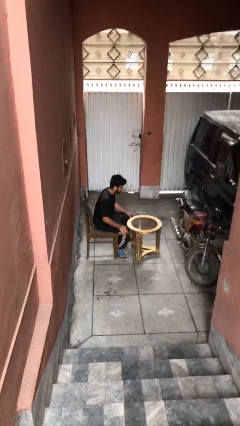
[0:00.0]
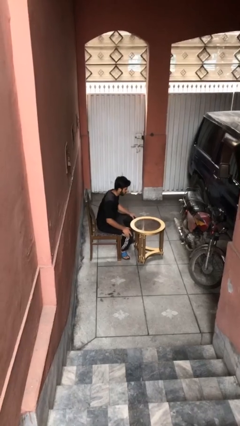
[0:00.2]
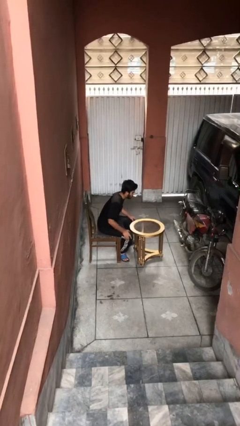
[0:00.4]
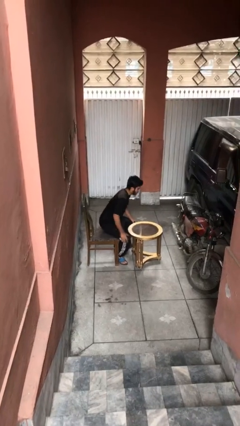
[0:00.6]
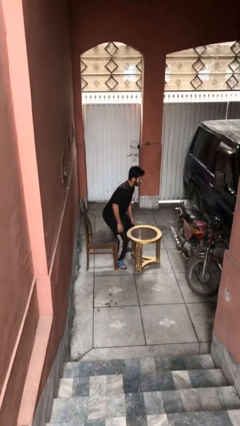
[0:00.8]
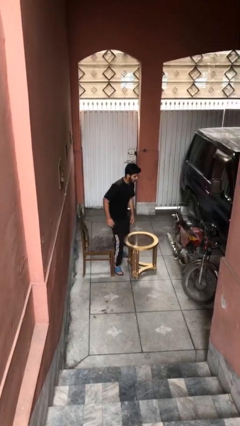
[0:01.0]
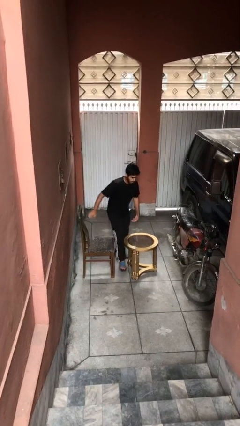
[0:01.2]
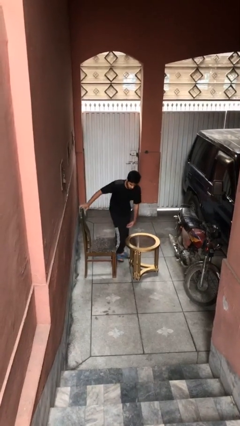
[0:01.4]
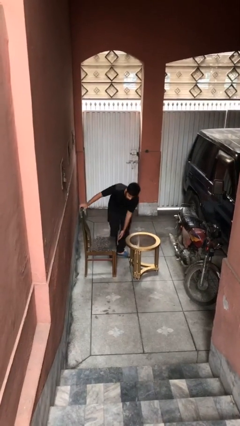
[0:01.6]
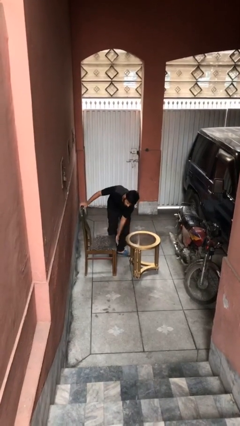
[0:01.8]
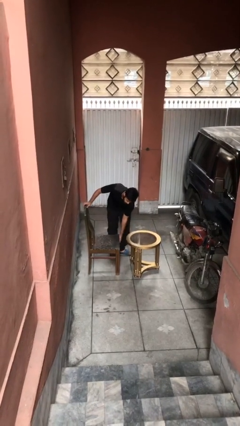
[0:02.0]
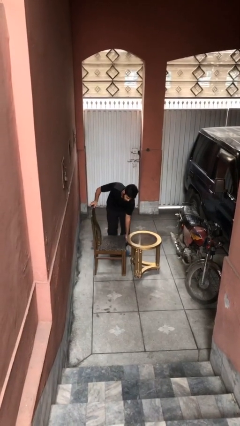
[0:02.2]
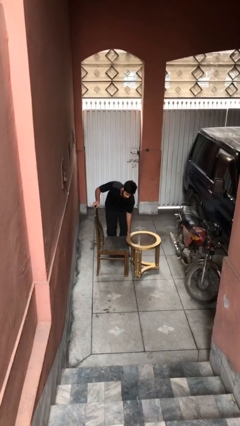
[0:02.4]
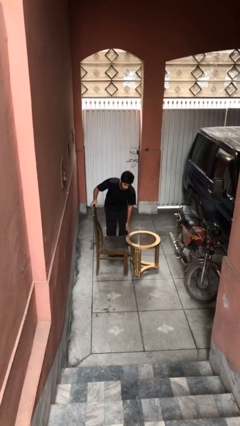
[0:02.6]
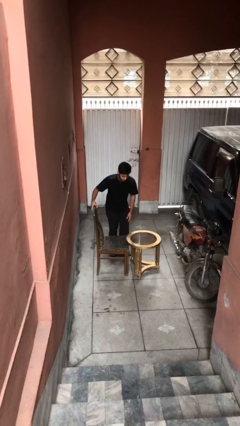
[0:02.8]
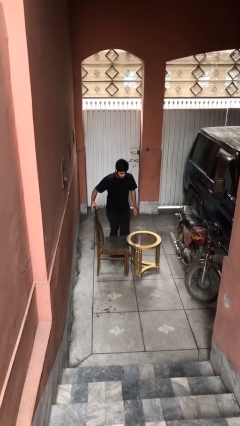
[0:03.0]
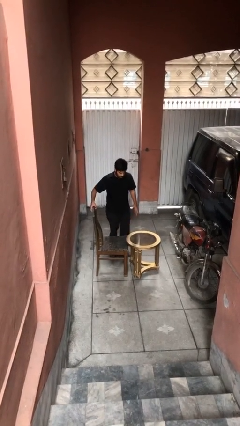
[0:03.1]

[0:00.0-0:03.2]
person stands up

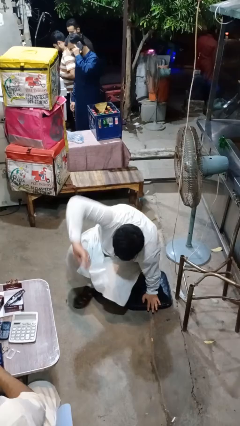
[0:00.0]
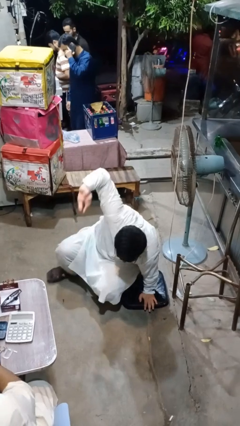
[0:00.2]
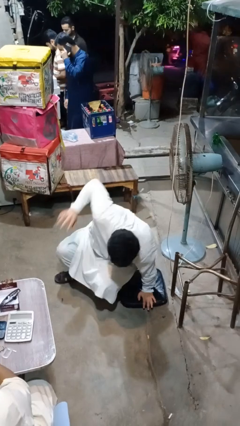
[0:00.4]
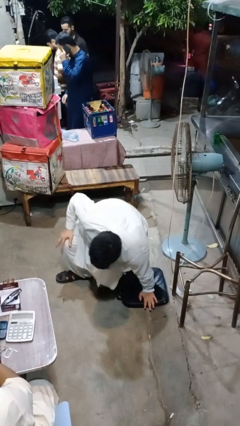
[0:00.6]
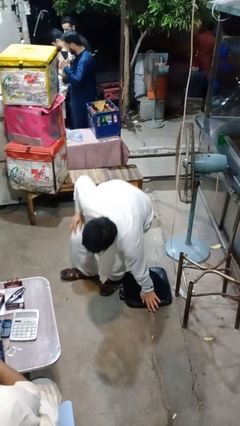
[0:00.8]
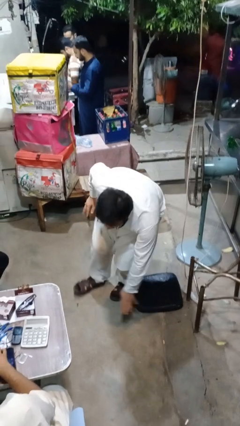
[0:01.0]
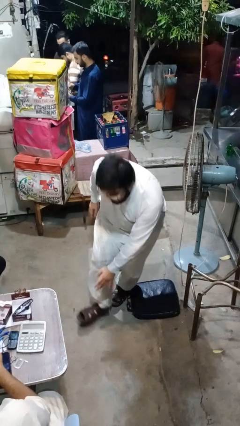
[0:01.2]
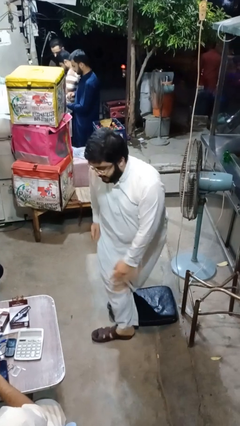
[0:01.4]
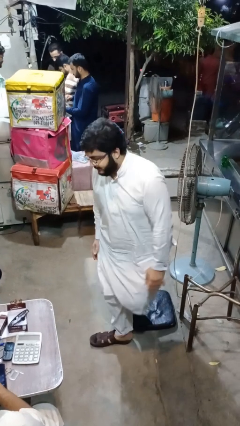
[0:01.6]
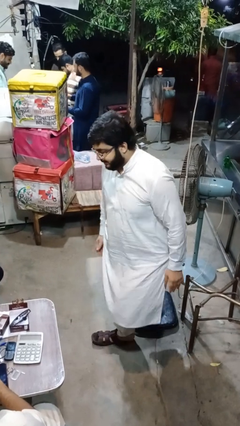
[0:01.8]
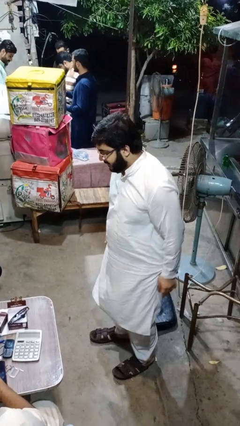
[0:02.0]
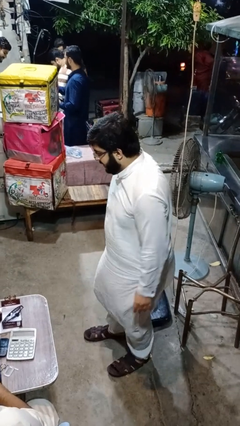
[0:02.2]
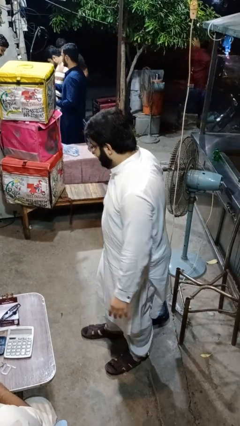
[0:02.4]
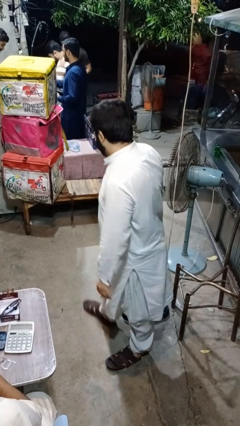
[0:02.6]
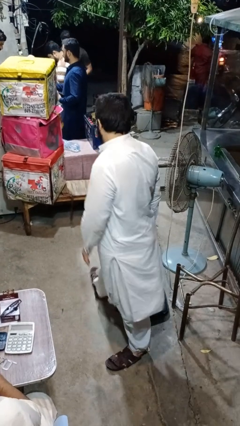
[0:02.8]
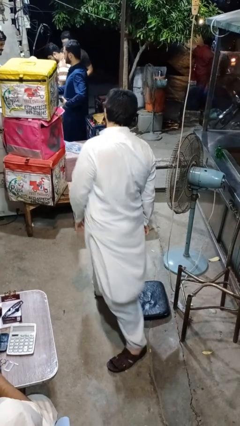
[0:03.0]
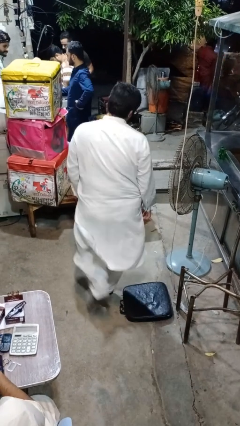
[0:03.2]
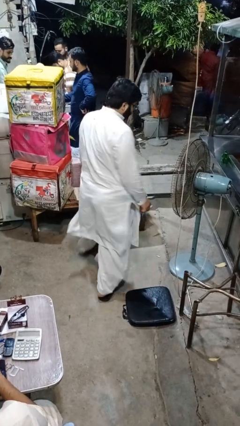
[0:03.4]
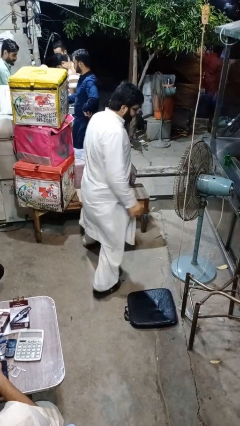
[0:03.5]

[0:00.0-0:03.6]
person stands up from floor

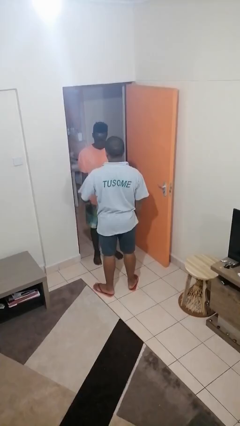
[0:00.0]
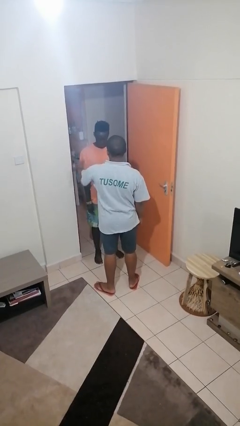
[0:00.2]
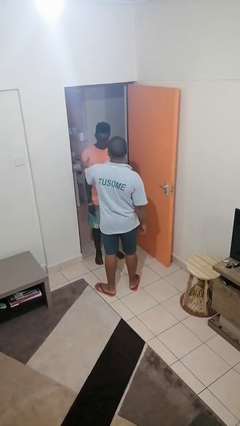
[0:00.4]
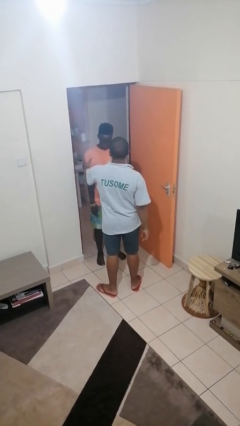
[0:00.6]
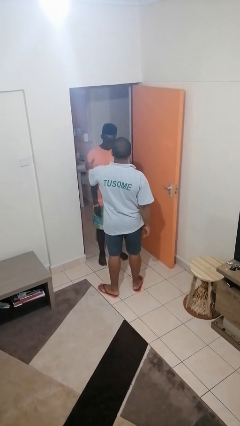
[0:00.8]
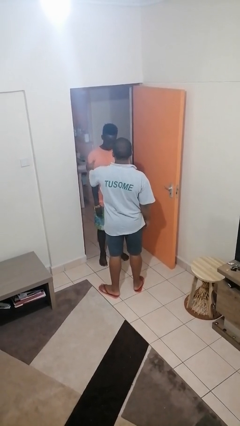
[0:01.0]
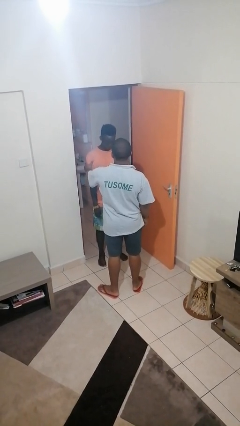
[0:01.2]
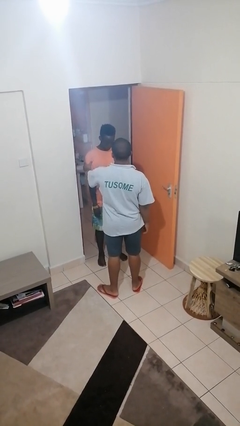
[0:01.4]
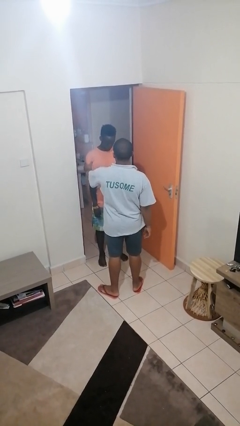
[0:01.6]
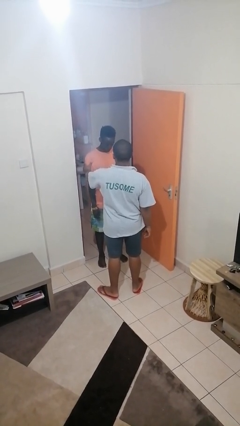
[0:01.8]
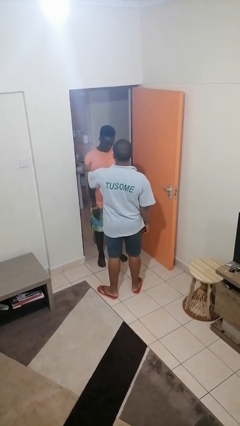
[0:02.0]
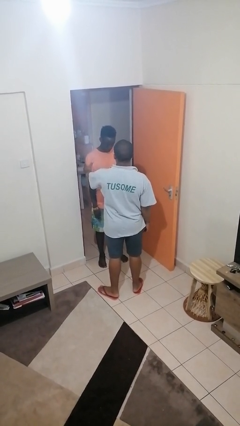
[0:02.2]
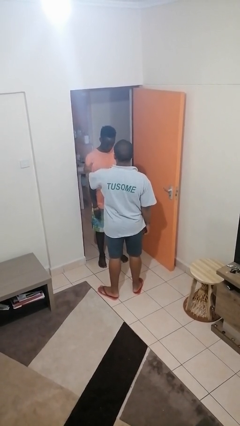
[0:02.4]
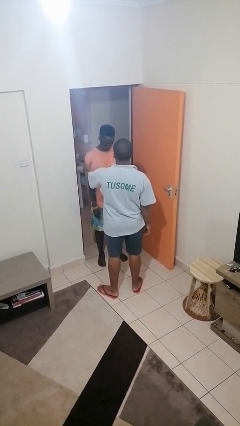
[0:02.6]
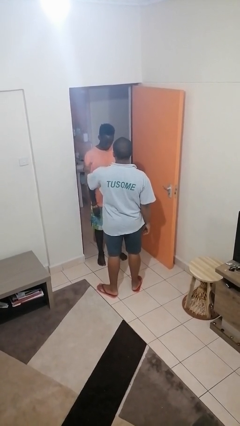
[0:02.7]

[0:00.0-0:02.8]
person grabs person by bicep

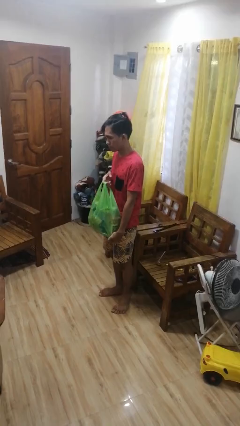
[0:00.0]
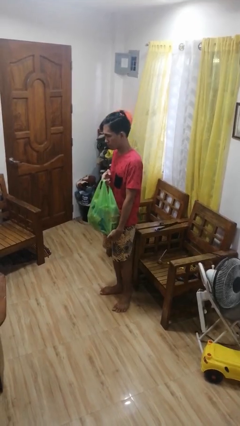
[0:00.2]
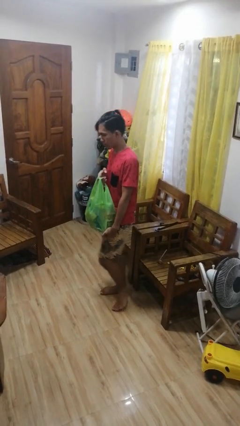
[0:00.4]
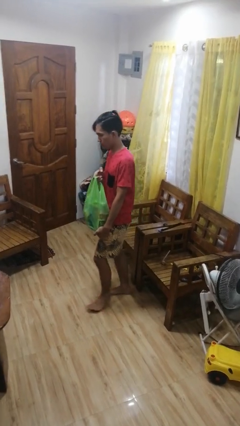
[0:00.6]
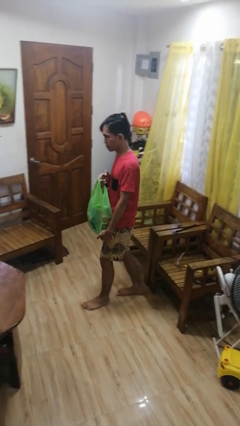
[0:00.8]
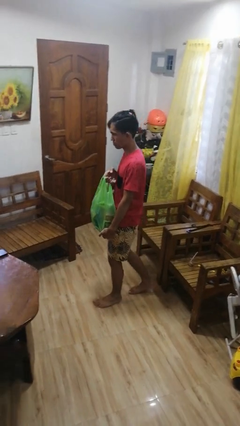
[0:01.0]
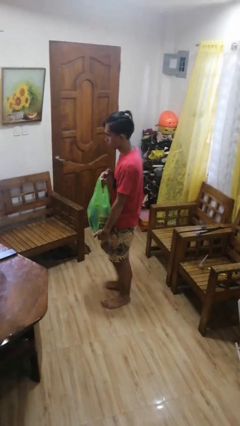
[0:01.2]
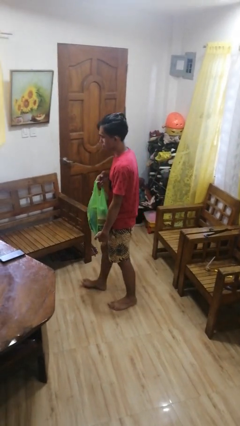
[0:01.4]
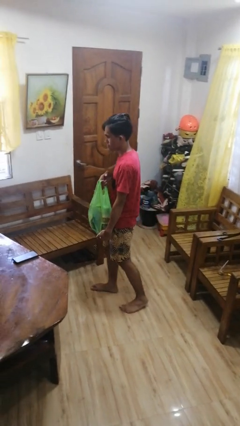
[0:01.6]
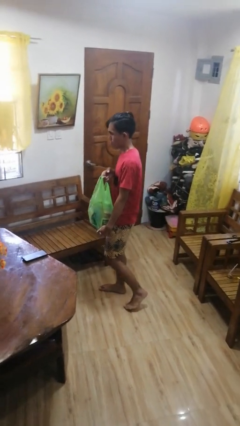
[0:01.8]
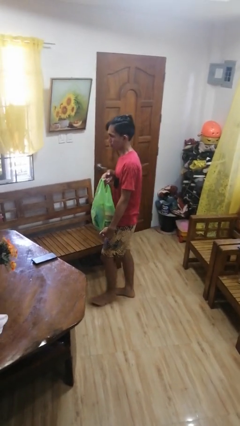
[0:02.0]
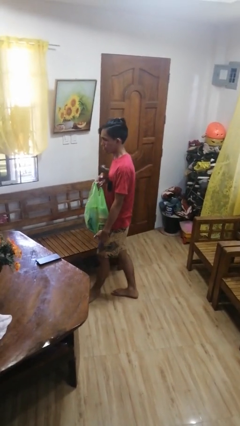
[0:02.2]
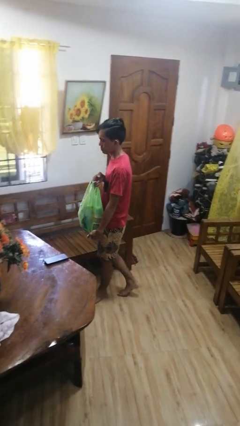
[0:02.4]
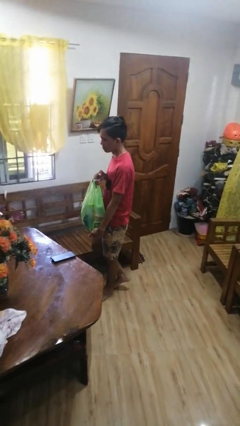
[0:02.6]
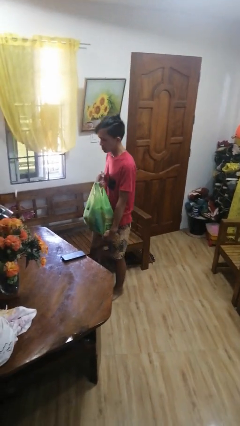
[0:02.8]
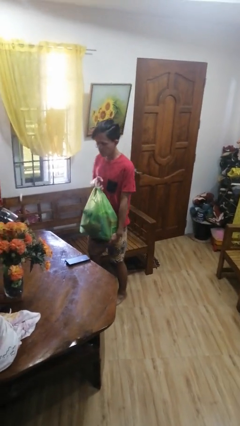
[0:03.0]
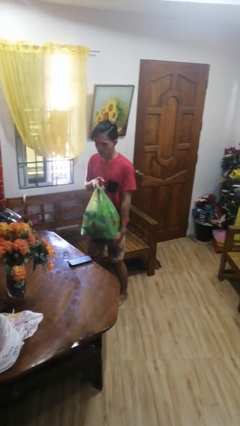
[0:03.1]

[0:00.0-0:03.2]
person carries groceries

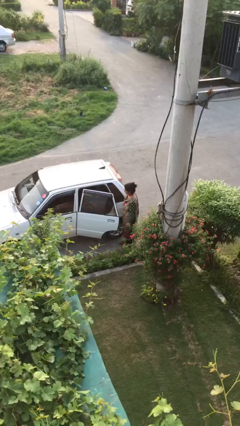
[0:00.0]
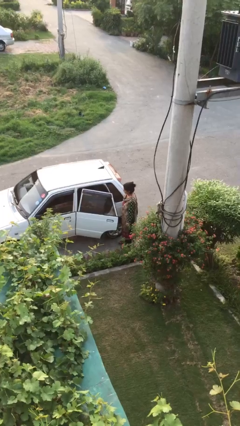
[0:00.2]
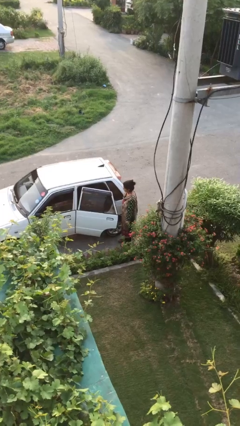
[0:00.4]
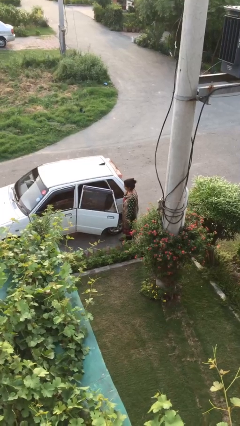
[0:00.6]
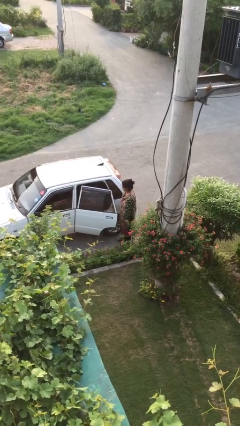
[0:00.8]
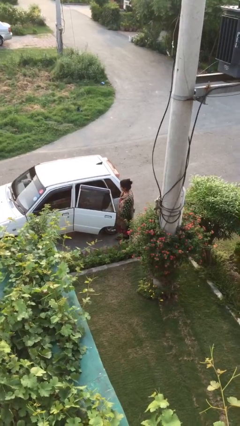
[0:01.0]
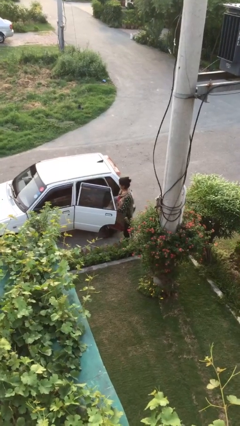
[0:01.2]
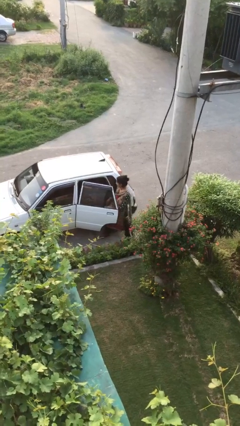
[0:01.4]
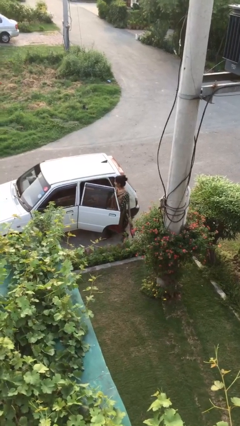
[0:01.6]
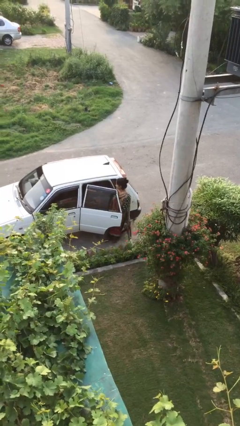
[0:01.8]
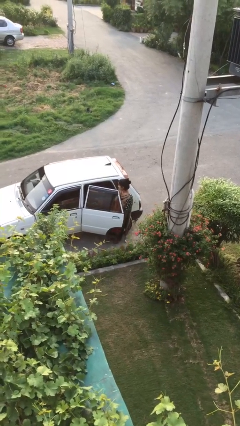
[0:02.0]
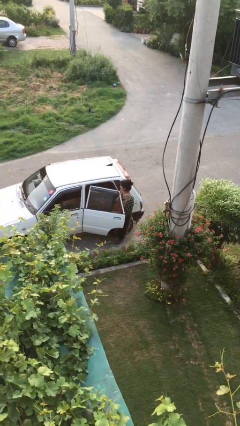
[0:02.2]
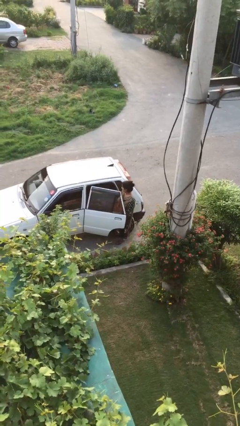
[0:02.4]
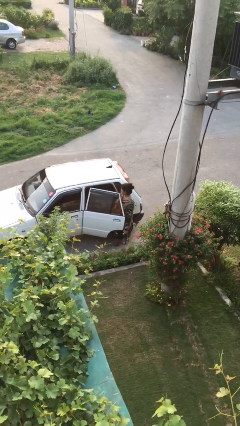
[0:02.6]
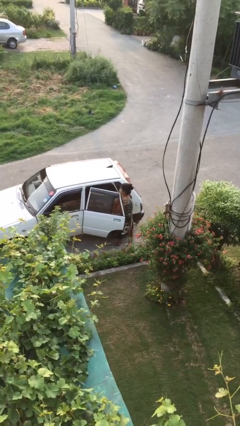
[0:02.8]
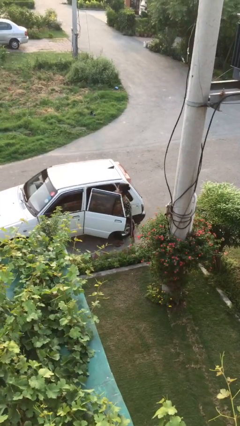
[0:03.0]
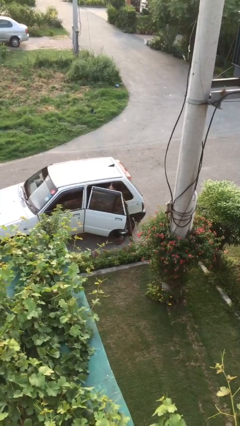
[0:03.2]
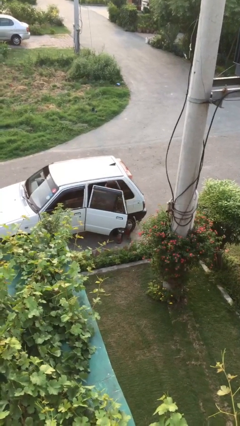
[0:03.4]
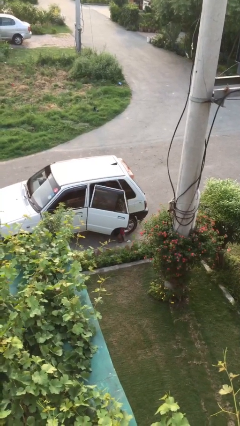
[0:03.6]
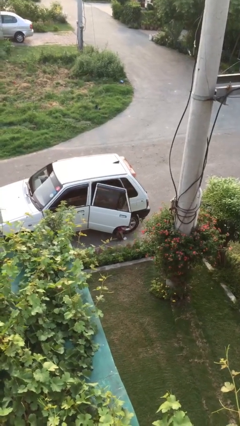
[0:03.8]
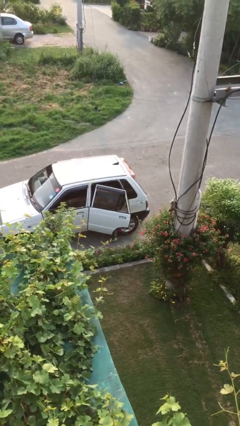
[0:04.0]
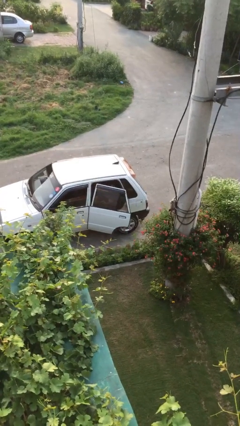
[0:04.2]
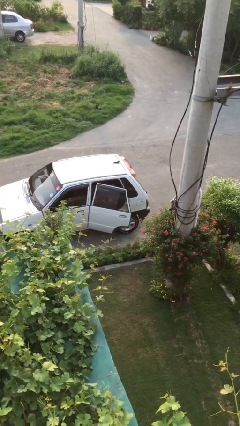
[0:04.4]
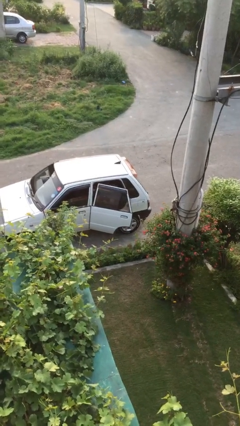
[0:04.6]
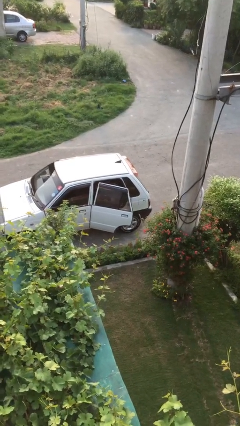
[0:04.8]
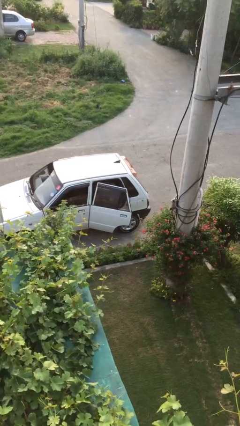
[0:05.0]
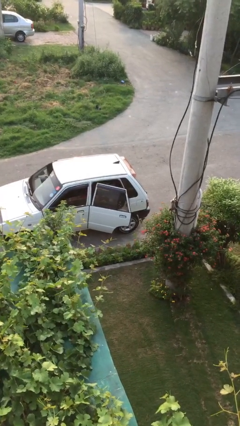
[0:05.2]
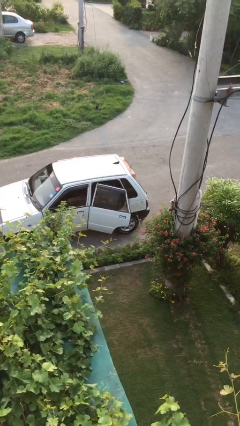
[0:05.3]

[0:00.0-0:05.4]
person enters car
